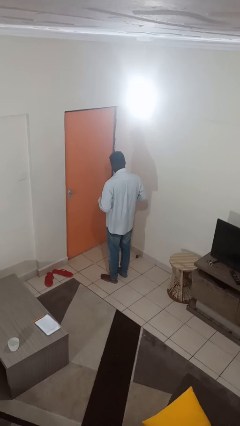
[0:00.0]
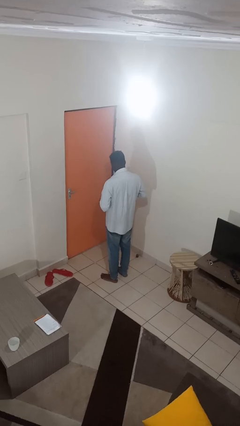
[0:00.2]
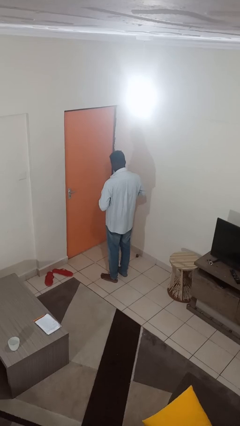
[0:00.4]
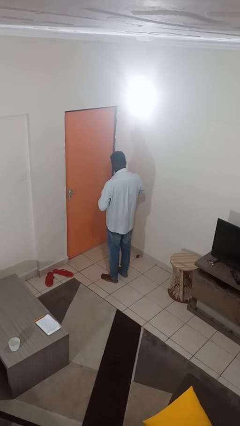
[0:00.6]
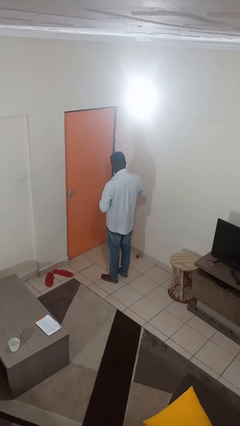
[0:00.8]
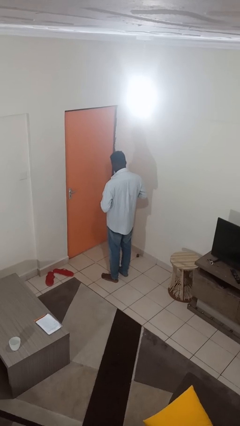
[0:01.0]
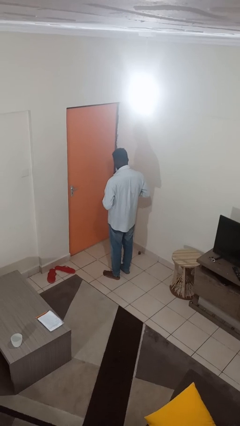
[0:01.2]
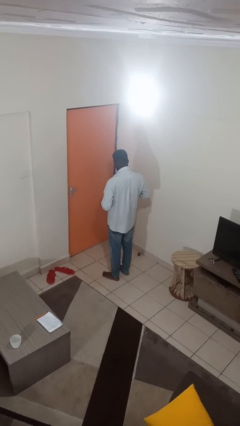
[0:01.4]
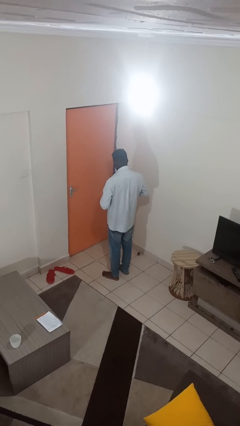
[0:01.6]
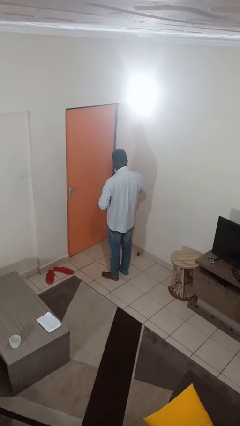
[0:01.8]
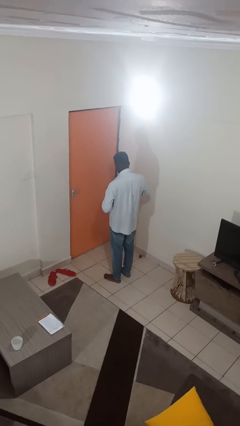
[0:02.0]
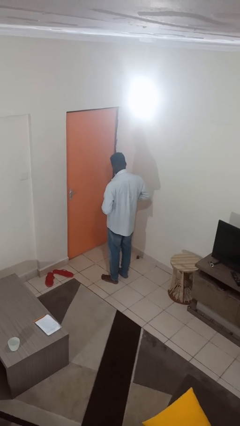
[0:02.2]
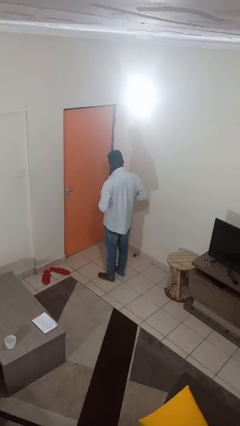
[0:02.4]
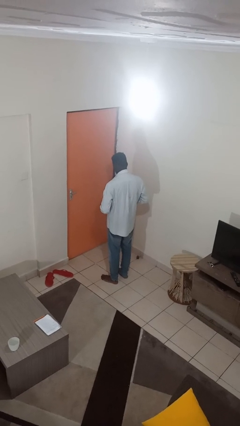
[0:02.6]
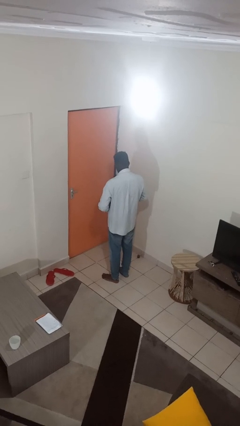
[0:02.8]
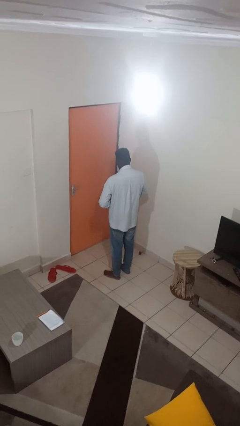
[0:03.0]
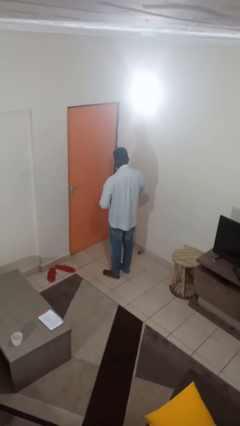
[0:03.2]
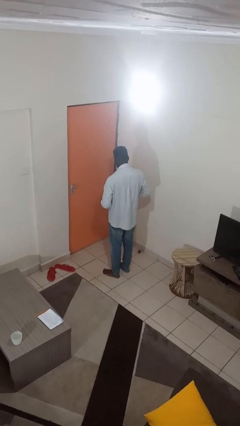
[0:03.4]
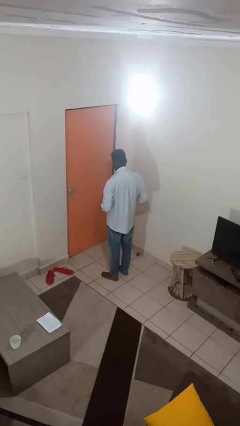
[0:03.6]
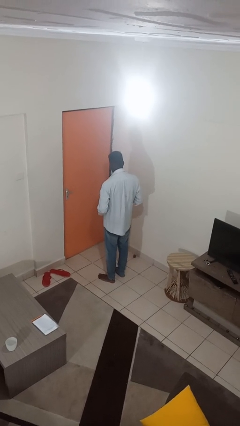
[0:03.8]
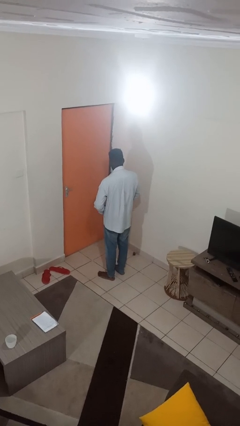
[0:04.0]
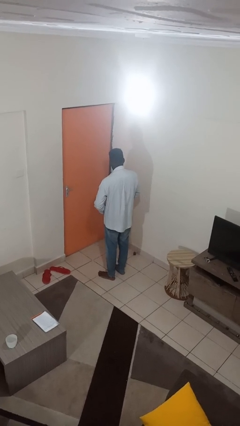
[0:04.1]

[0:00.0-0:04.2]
person unbuttons shirt

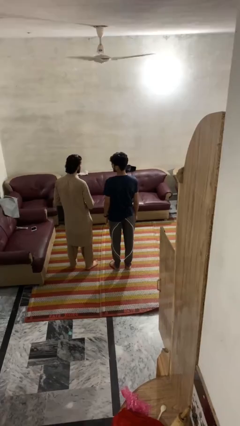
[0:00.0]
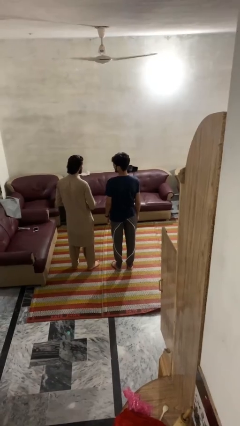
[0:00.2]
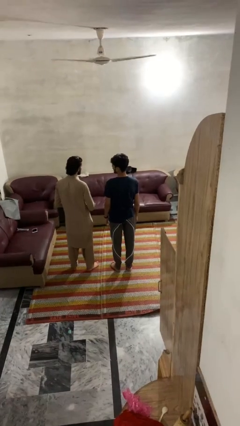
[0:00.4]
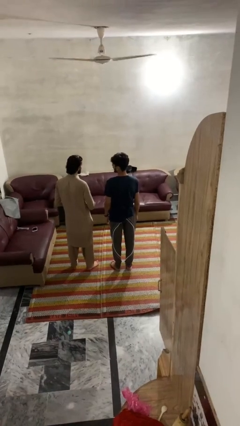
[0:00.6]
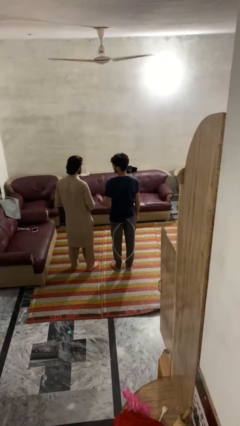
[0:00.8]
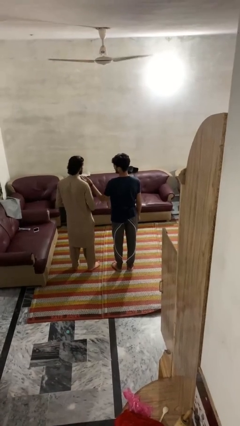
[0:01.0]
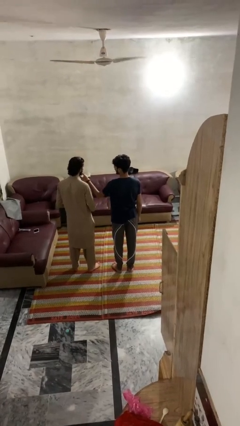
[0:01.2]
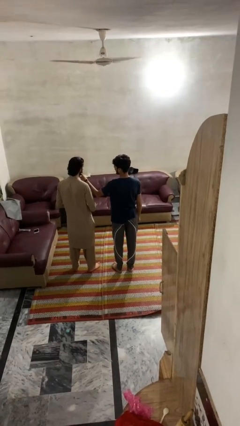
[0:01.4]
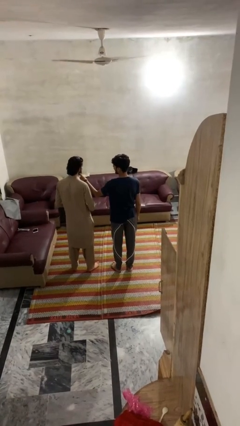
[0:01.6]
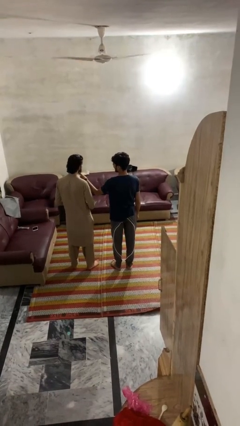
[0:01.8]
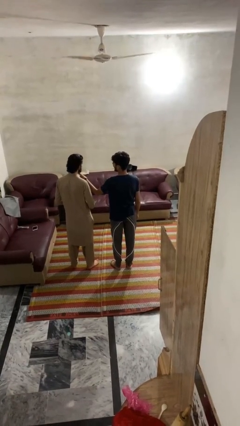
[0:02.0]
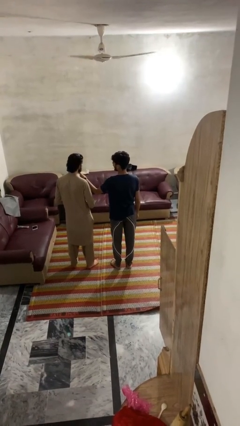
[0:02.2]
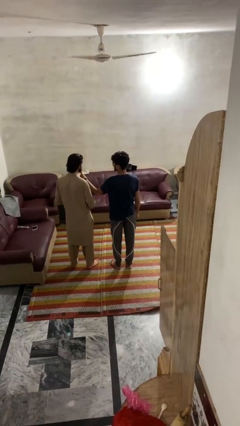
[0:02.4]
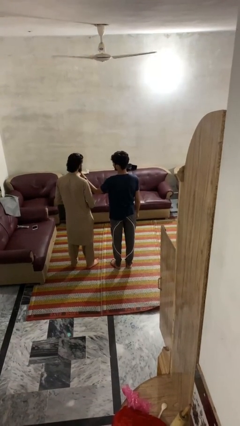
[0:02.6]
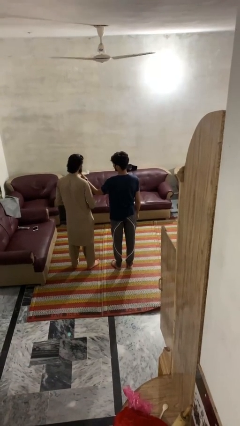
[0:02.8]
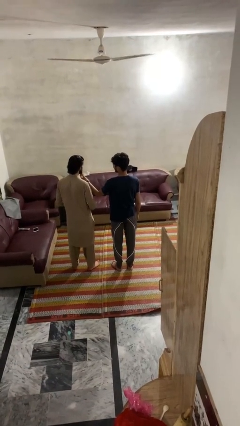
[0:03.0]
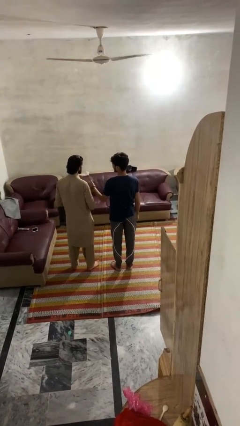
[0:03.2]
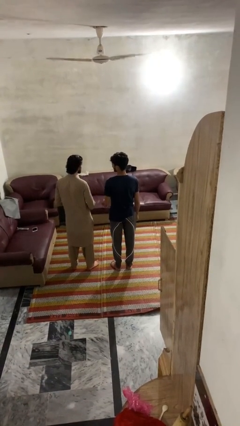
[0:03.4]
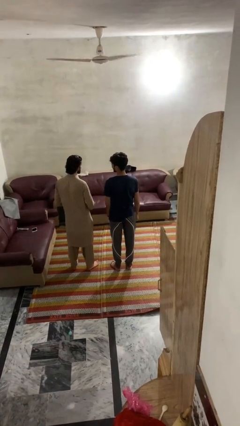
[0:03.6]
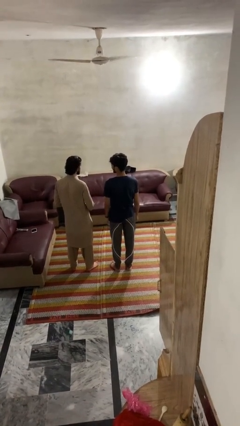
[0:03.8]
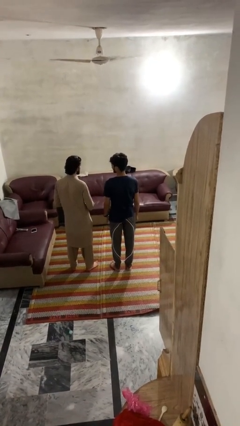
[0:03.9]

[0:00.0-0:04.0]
person touches face of person

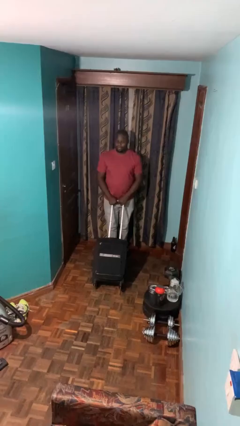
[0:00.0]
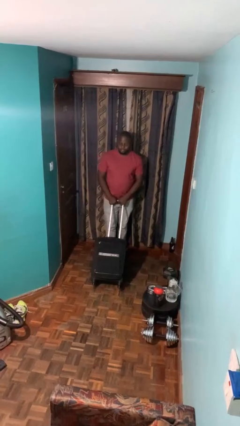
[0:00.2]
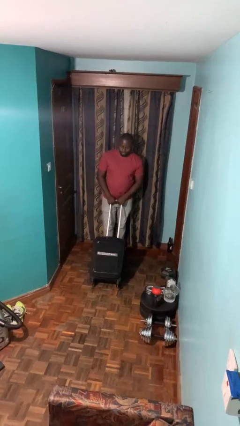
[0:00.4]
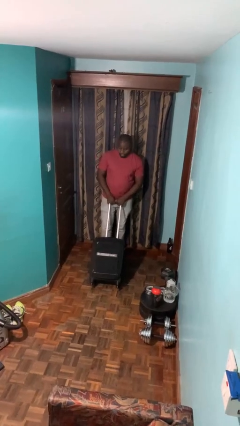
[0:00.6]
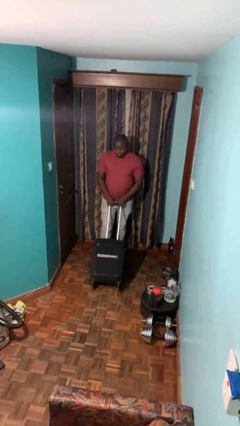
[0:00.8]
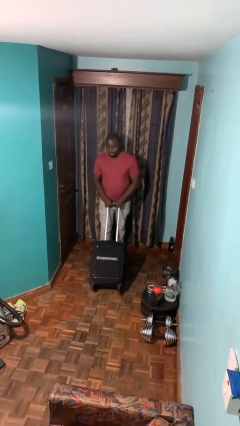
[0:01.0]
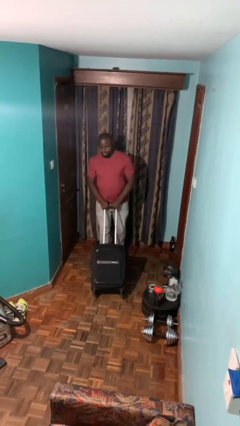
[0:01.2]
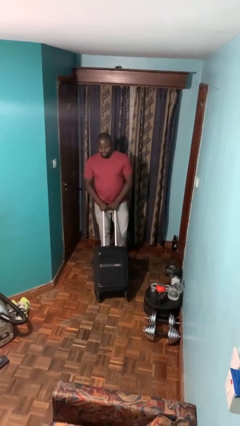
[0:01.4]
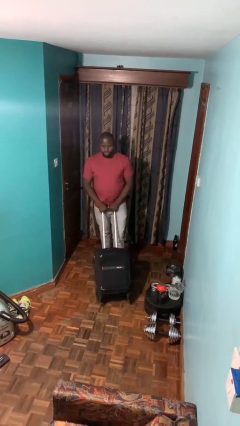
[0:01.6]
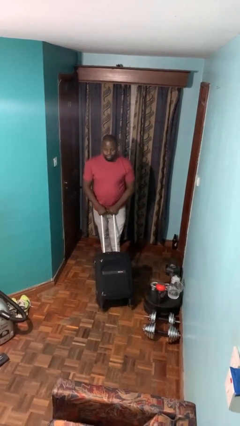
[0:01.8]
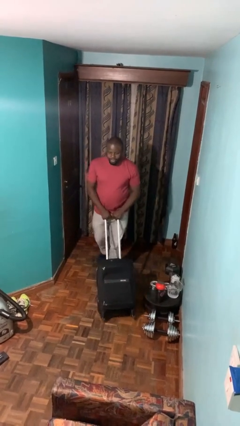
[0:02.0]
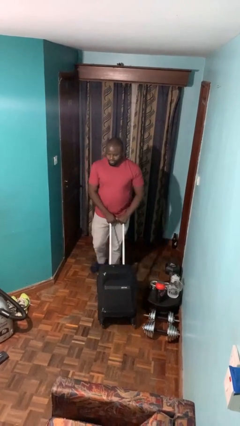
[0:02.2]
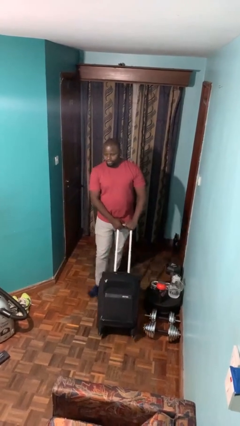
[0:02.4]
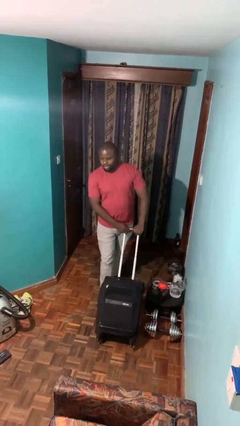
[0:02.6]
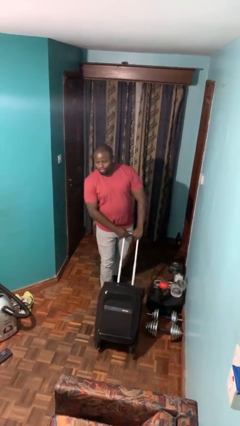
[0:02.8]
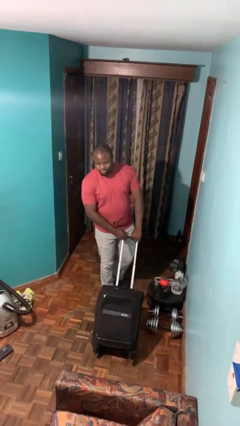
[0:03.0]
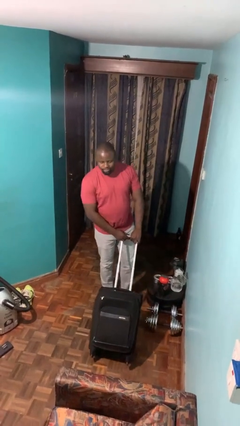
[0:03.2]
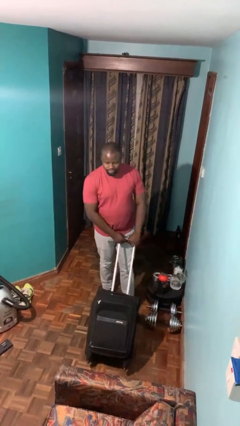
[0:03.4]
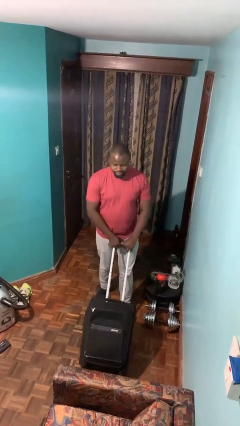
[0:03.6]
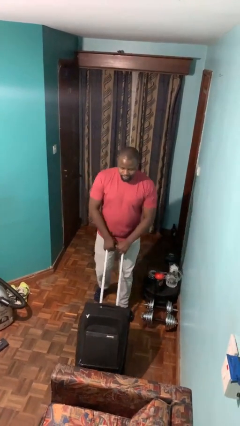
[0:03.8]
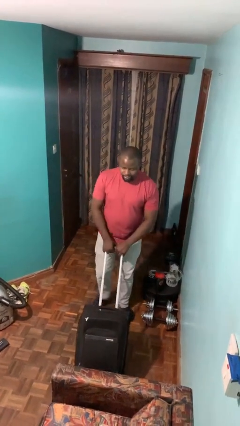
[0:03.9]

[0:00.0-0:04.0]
person pushes wheeled cart

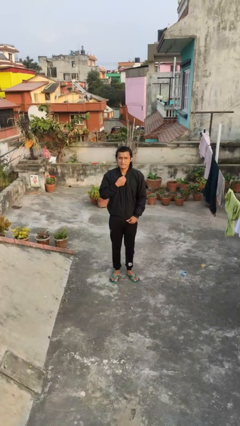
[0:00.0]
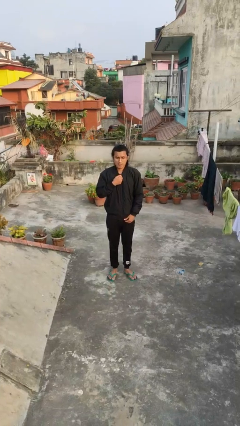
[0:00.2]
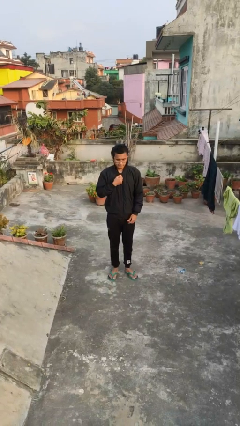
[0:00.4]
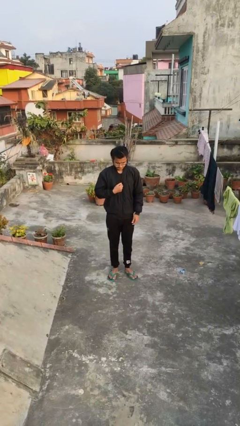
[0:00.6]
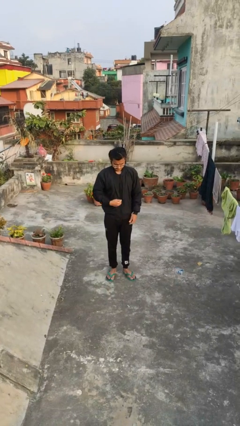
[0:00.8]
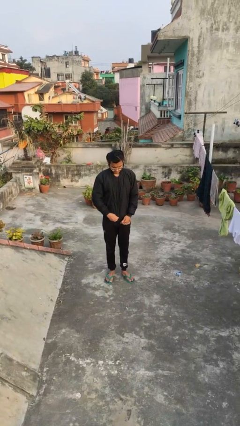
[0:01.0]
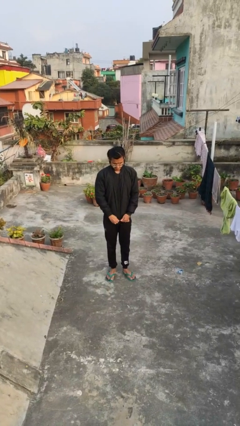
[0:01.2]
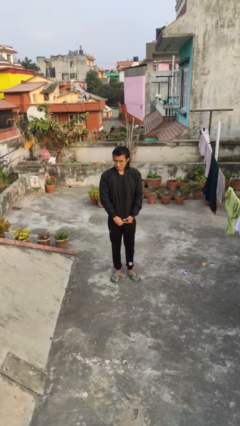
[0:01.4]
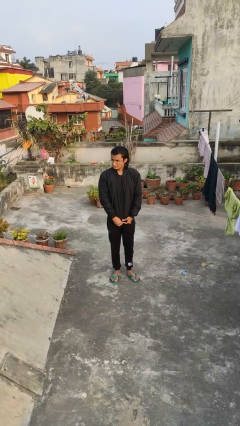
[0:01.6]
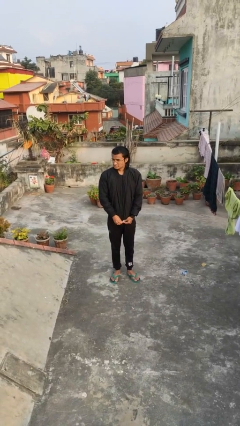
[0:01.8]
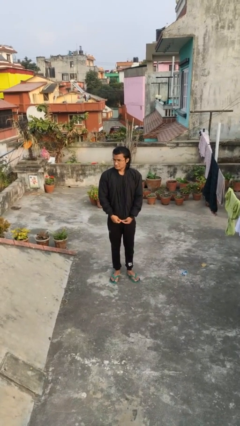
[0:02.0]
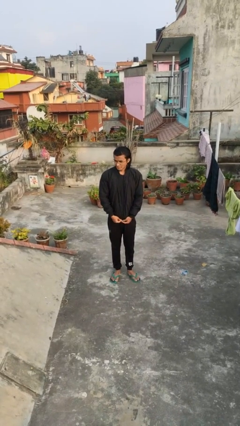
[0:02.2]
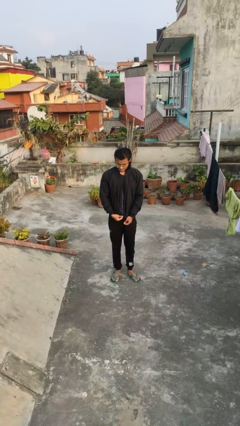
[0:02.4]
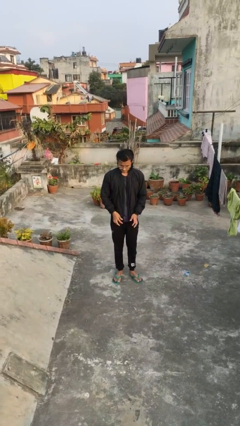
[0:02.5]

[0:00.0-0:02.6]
person unzips jacket

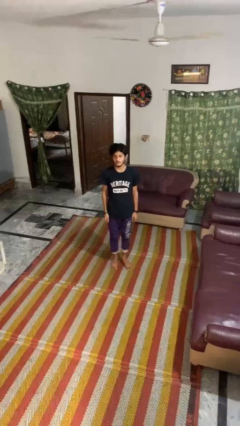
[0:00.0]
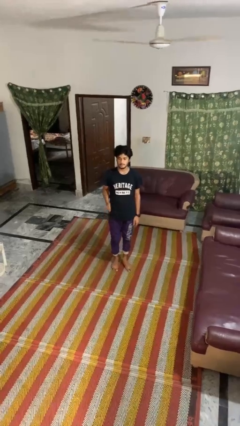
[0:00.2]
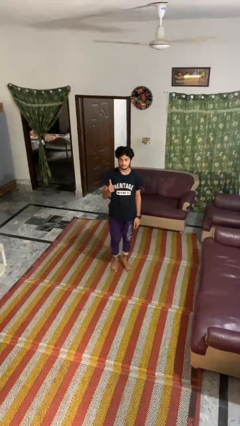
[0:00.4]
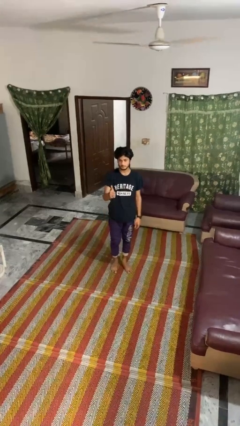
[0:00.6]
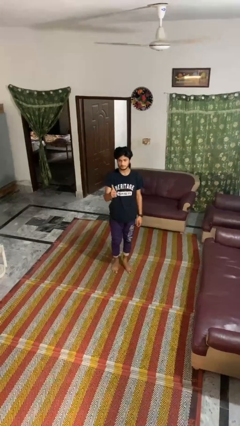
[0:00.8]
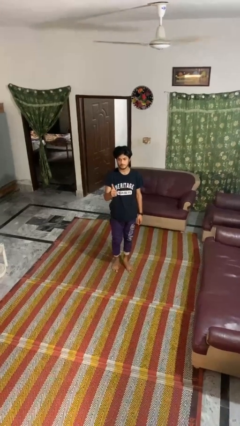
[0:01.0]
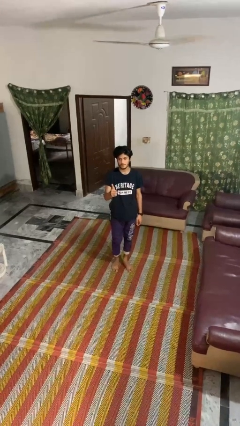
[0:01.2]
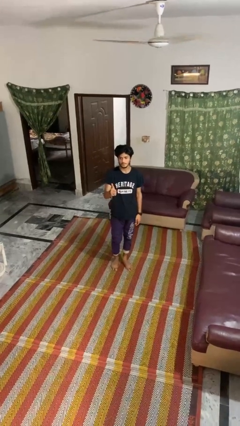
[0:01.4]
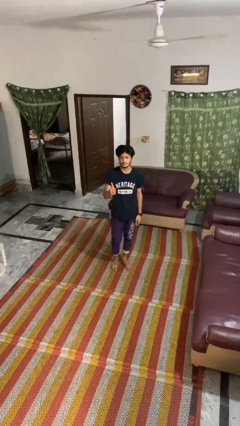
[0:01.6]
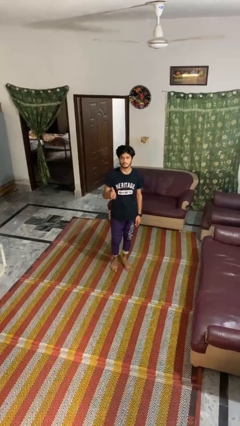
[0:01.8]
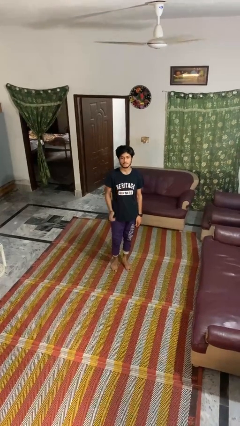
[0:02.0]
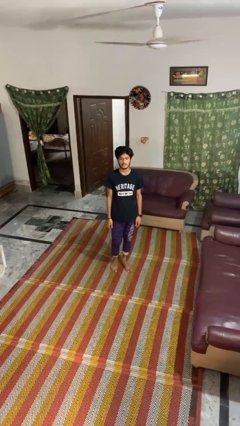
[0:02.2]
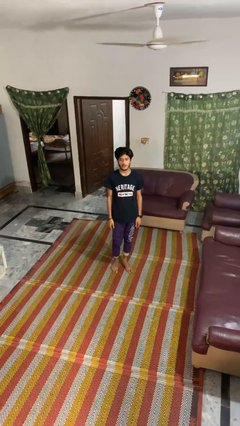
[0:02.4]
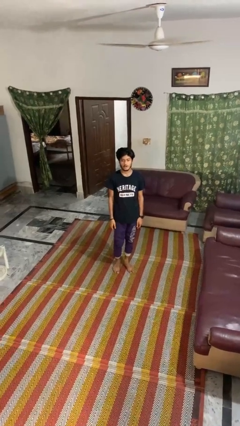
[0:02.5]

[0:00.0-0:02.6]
person gestures thumbs up

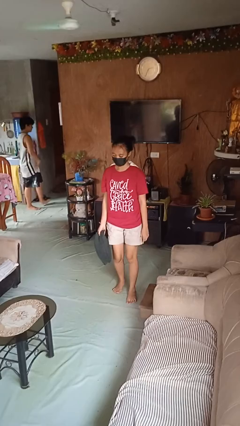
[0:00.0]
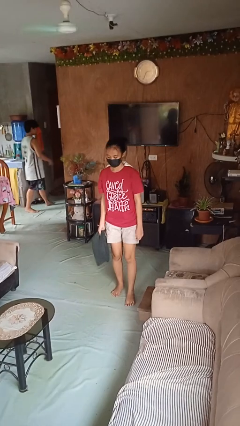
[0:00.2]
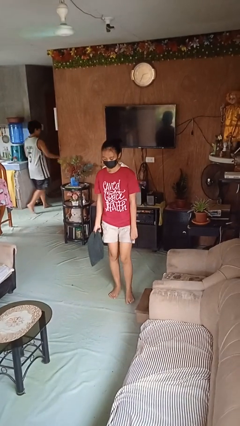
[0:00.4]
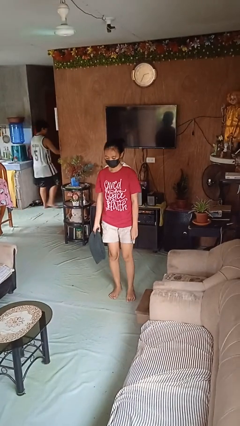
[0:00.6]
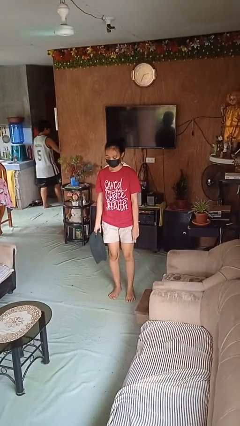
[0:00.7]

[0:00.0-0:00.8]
person throws object to ground
